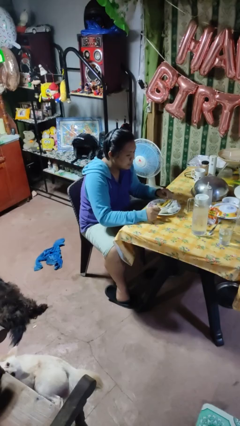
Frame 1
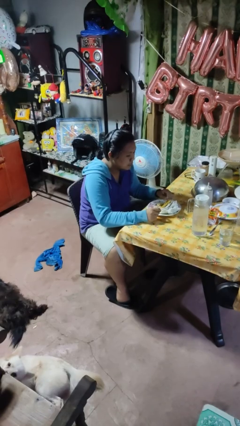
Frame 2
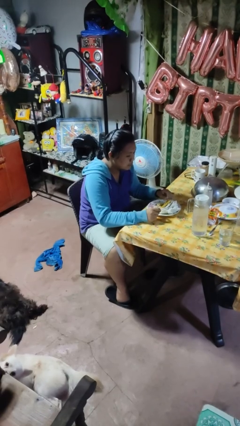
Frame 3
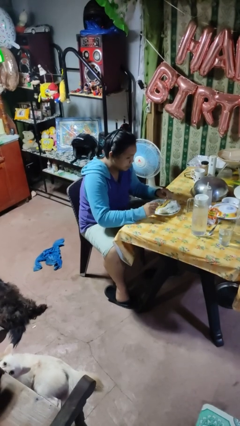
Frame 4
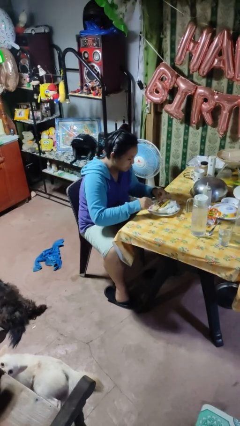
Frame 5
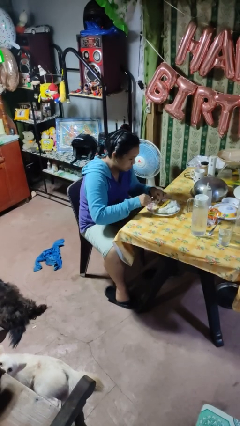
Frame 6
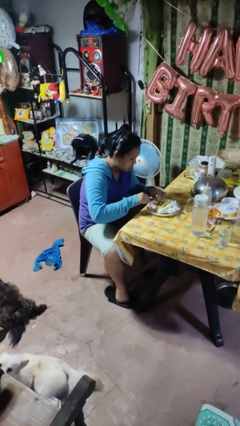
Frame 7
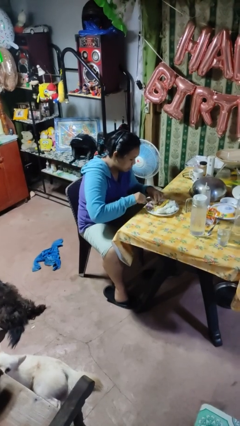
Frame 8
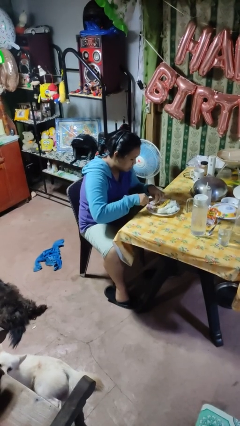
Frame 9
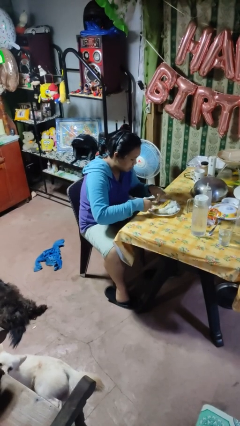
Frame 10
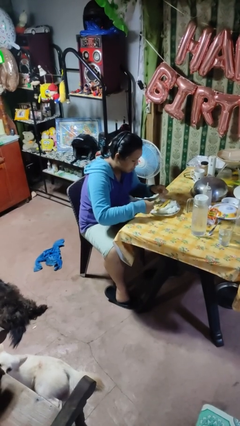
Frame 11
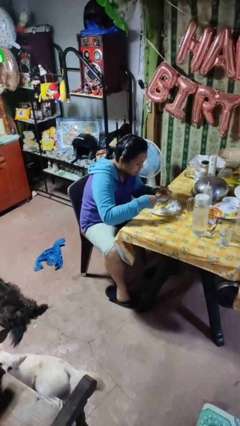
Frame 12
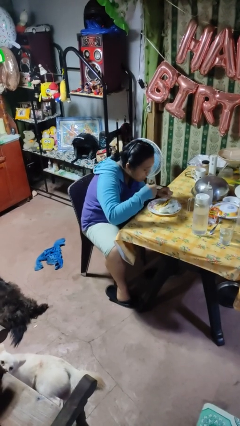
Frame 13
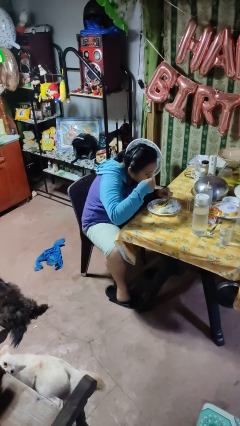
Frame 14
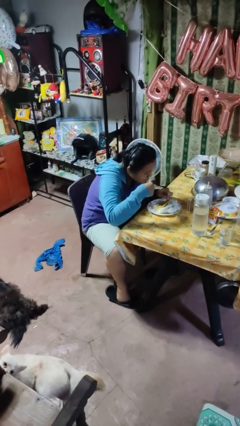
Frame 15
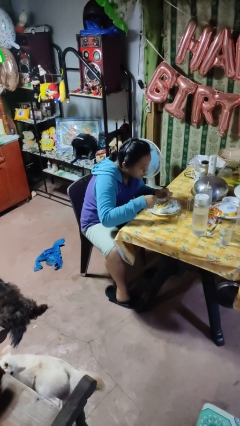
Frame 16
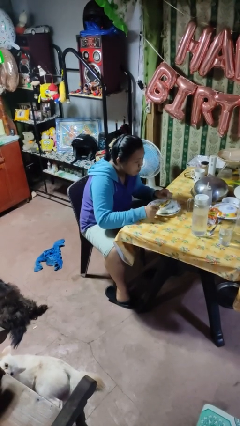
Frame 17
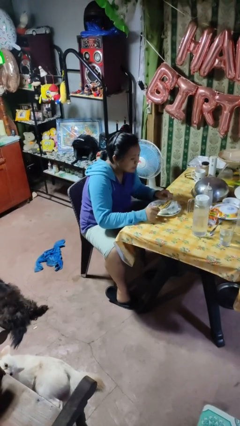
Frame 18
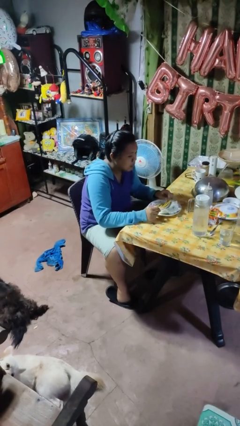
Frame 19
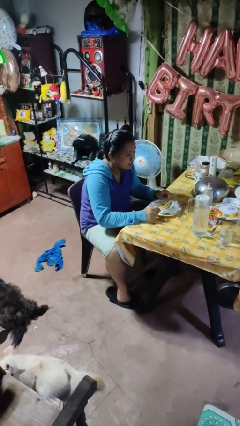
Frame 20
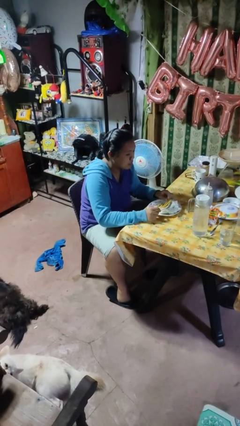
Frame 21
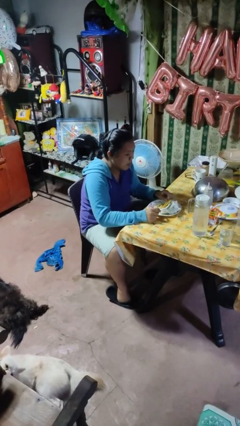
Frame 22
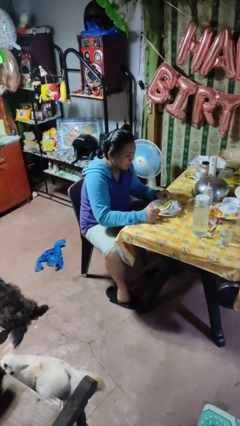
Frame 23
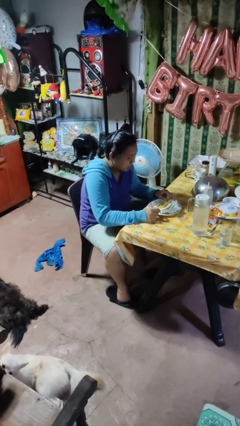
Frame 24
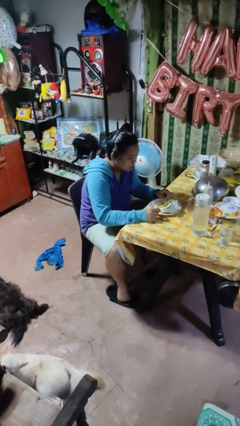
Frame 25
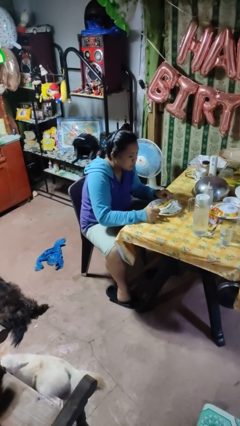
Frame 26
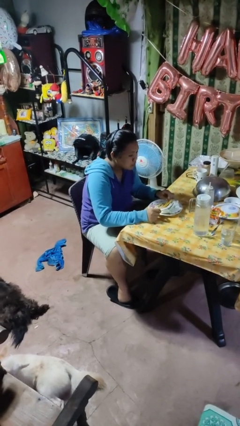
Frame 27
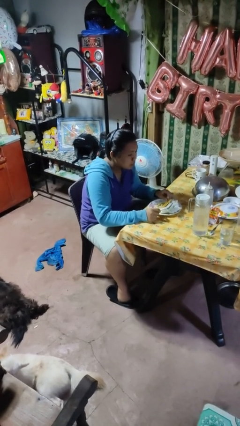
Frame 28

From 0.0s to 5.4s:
person eats with utensil

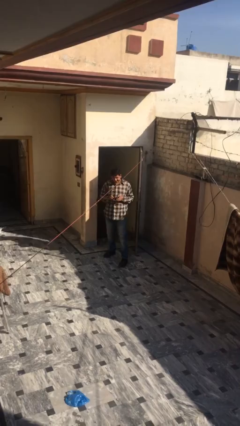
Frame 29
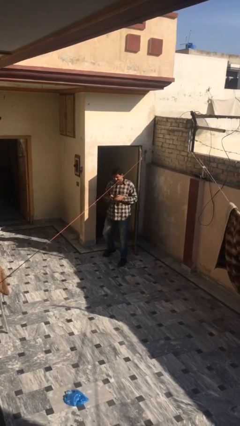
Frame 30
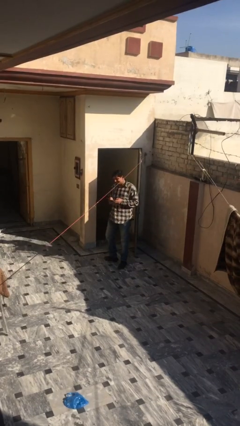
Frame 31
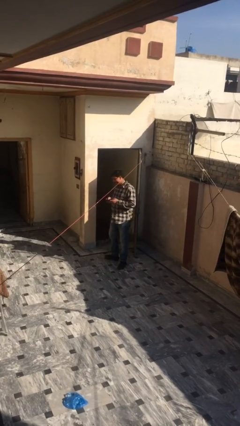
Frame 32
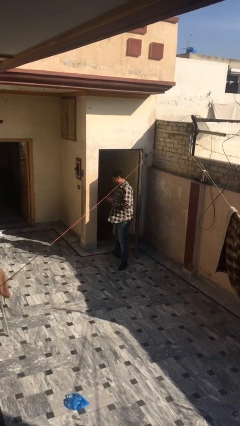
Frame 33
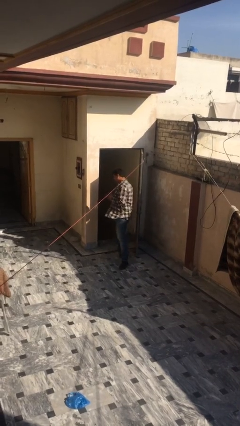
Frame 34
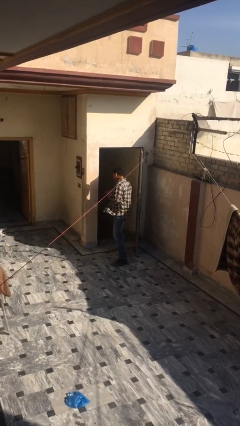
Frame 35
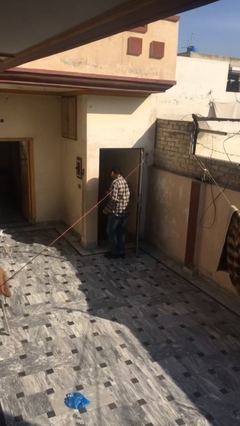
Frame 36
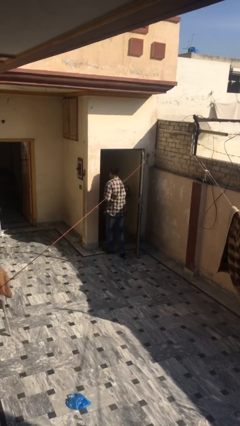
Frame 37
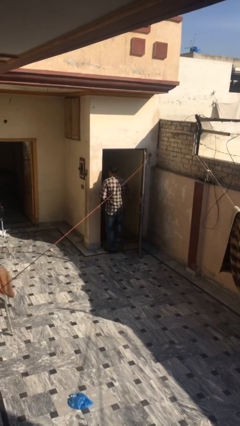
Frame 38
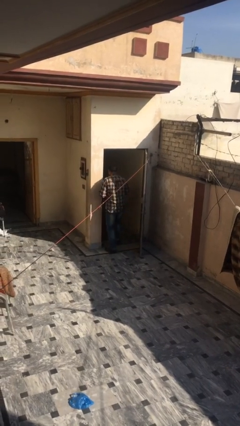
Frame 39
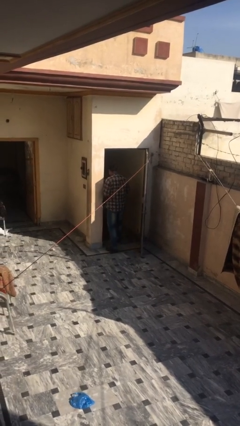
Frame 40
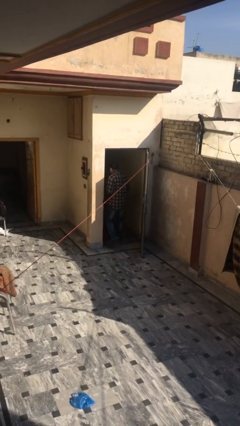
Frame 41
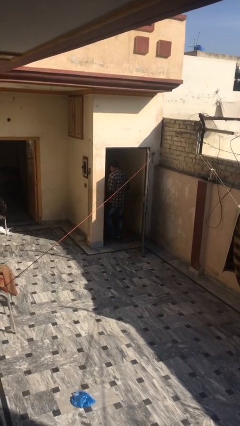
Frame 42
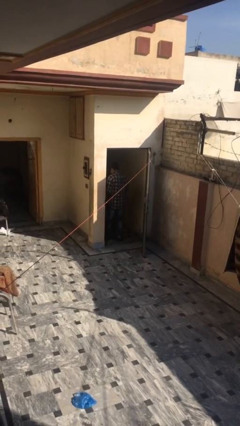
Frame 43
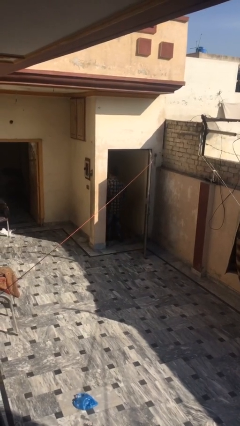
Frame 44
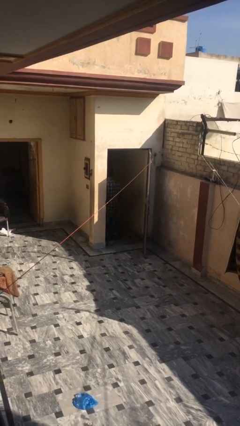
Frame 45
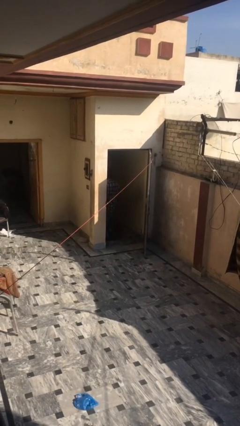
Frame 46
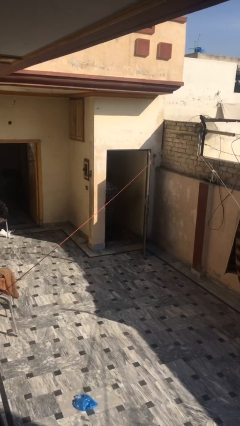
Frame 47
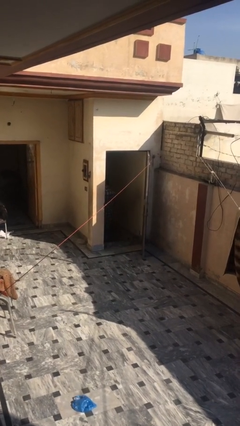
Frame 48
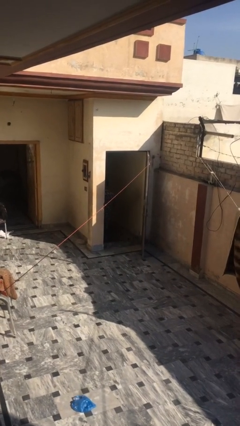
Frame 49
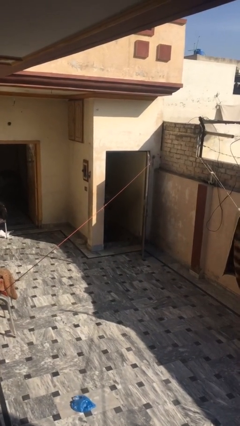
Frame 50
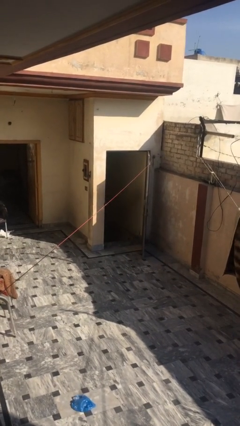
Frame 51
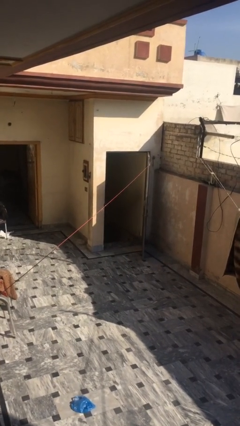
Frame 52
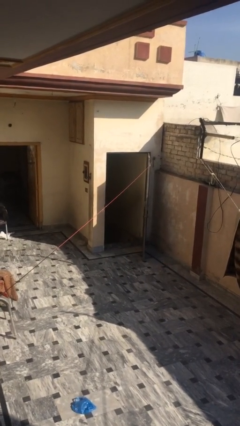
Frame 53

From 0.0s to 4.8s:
person exits scene through structure

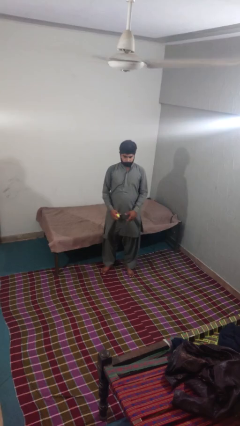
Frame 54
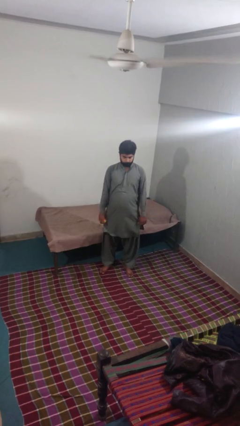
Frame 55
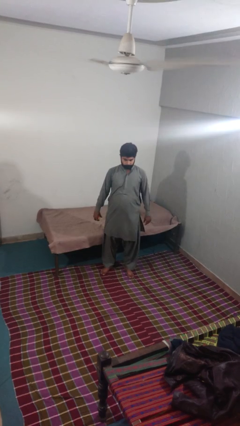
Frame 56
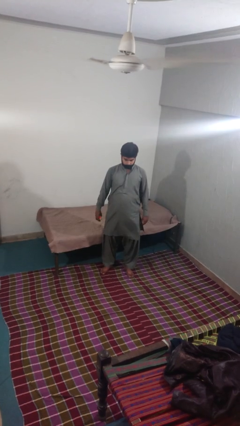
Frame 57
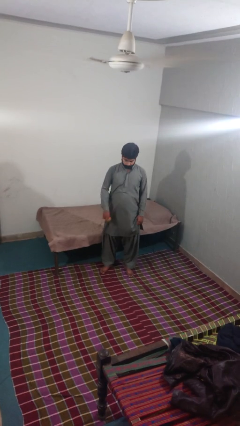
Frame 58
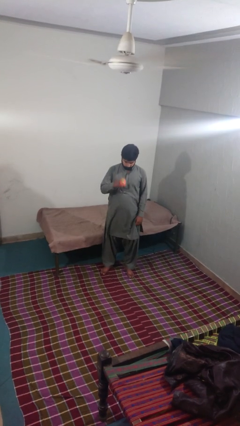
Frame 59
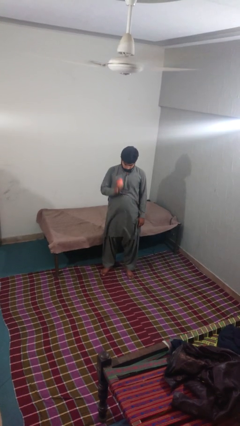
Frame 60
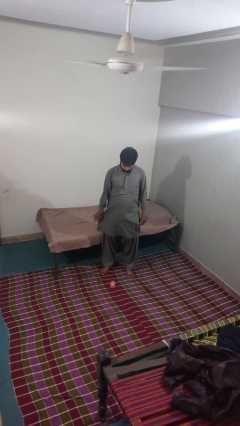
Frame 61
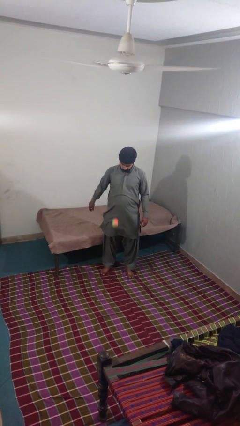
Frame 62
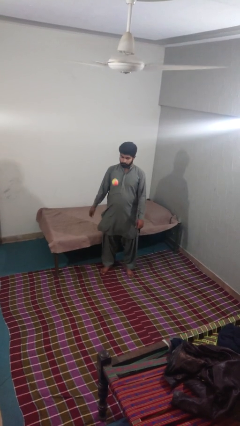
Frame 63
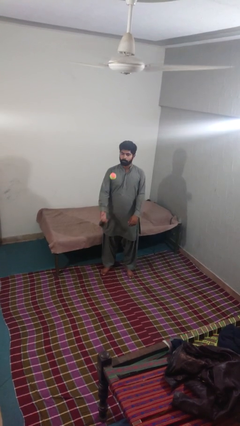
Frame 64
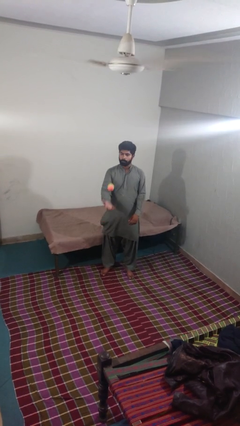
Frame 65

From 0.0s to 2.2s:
person bounces ball on floor

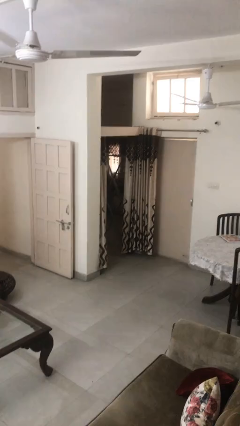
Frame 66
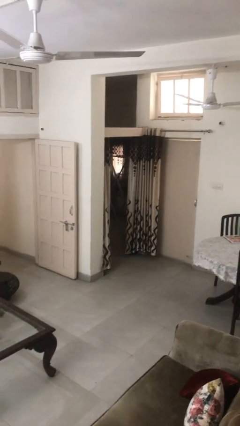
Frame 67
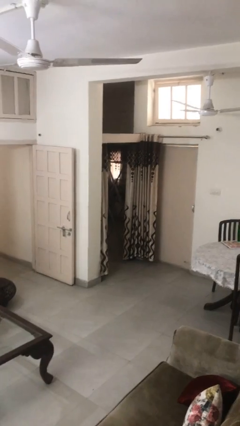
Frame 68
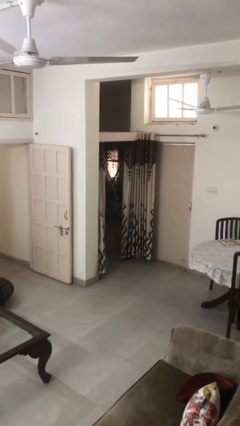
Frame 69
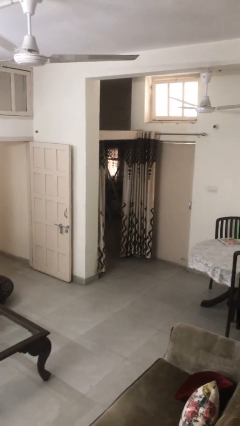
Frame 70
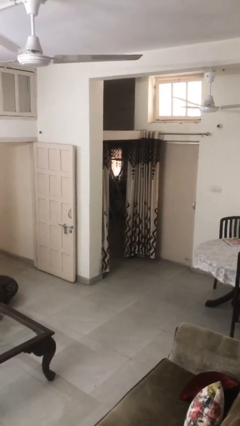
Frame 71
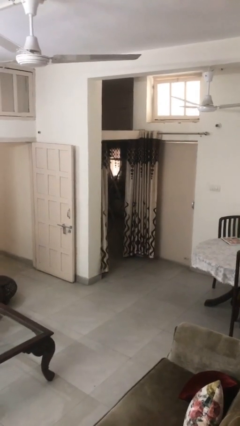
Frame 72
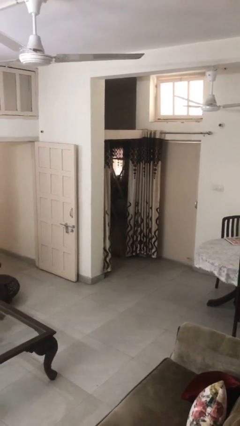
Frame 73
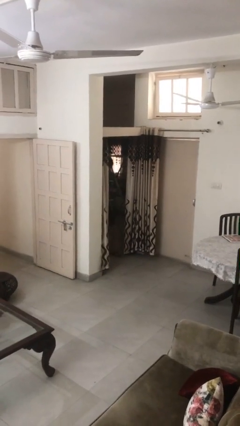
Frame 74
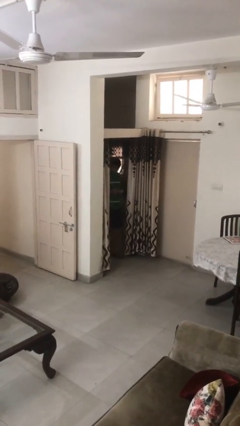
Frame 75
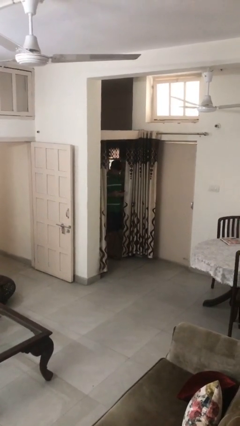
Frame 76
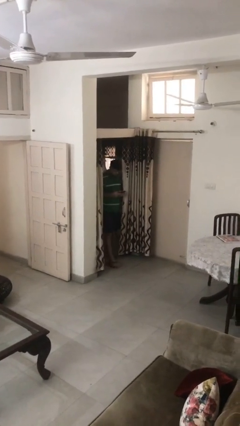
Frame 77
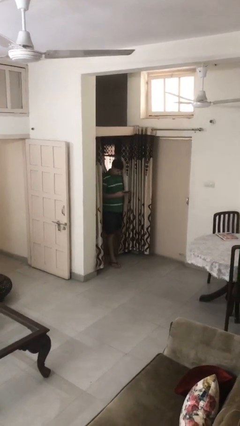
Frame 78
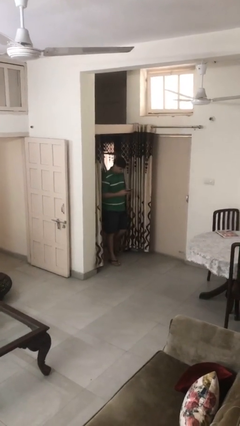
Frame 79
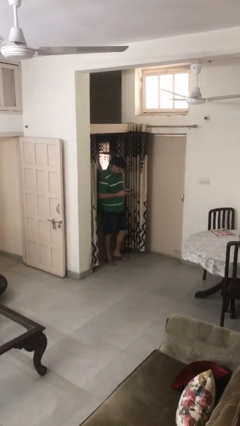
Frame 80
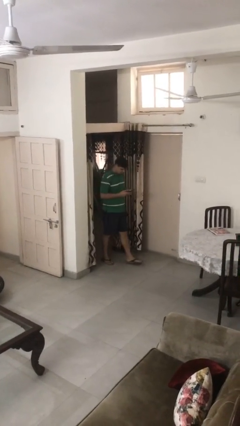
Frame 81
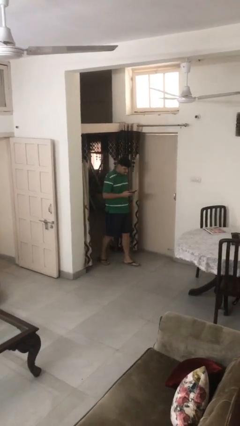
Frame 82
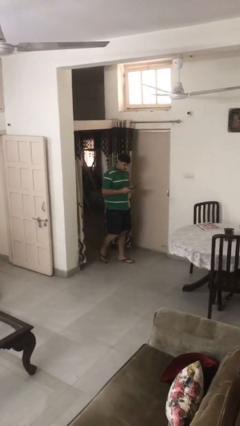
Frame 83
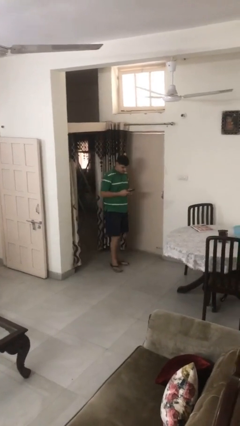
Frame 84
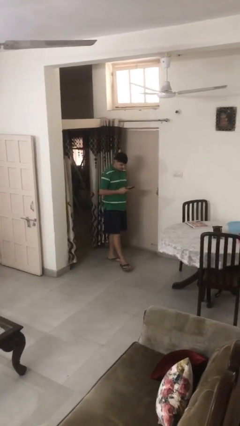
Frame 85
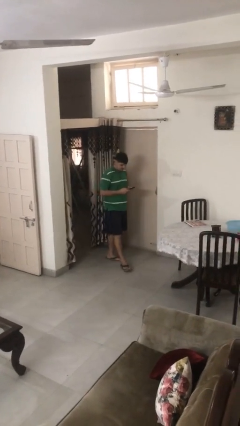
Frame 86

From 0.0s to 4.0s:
person enters scene through structure

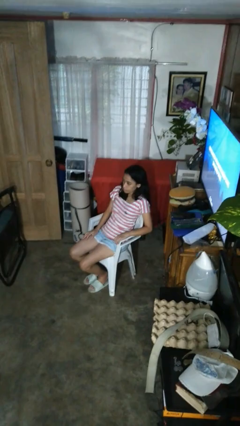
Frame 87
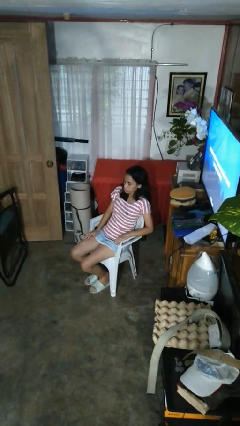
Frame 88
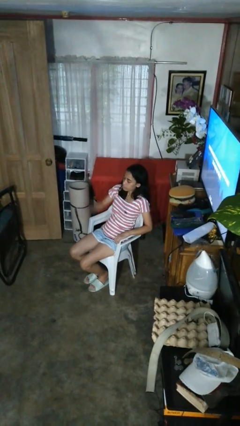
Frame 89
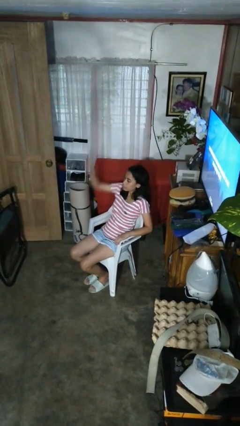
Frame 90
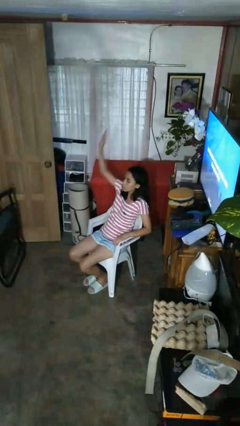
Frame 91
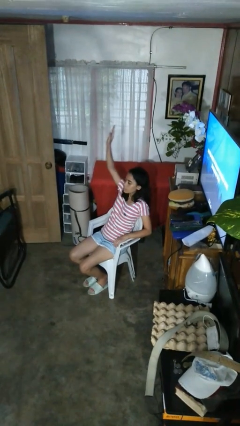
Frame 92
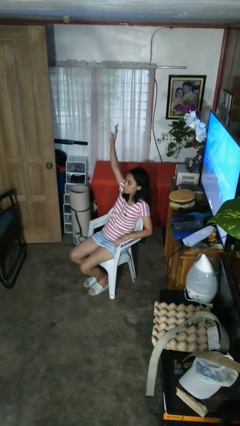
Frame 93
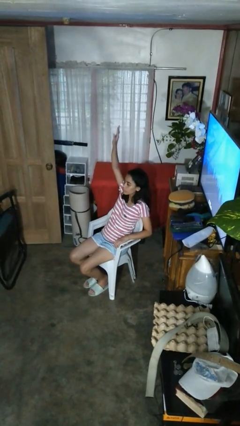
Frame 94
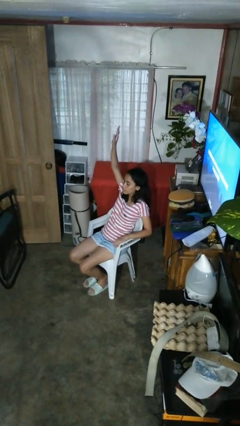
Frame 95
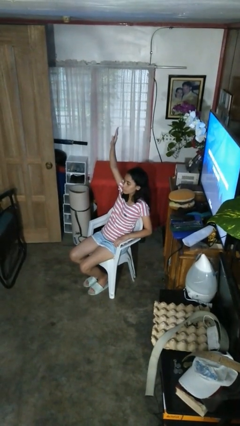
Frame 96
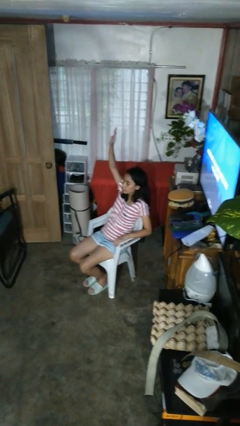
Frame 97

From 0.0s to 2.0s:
person gestures raise hand
